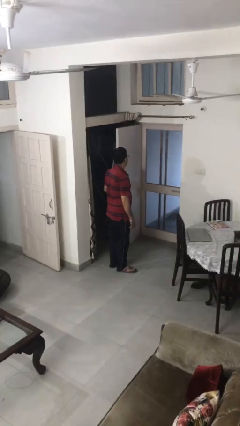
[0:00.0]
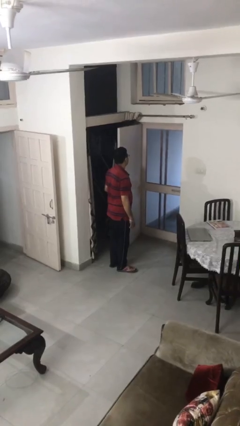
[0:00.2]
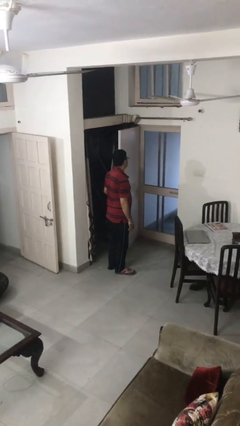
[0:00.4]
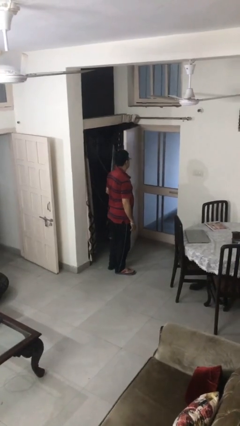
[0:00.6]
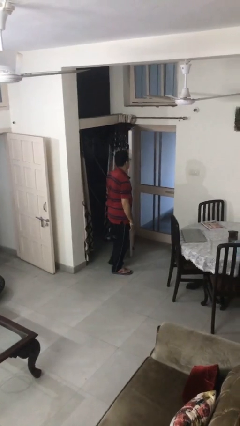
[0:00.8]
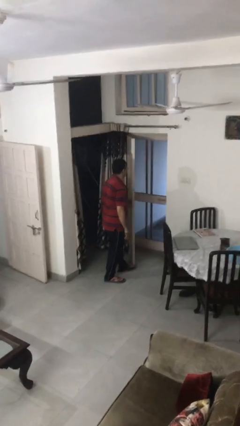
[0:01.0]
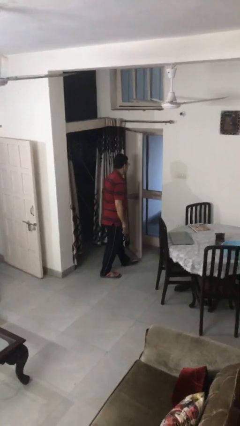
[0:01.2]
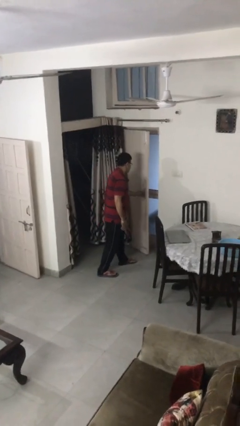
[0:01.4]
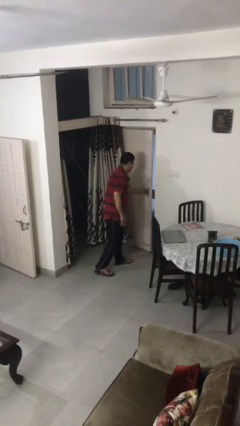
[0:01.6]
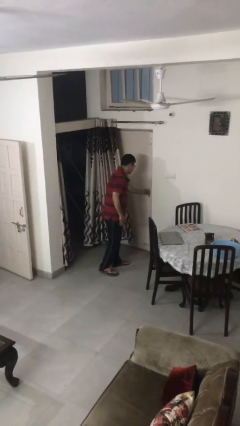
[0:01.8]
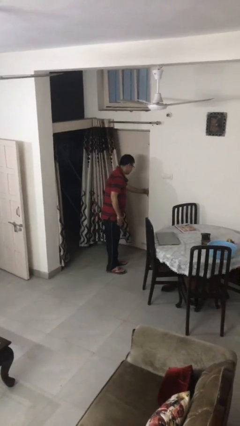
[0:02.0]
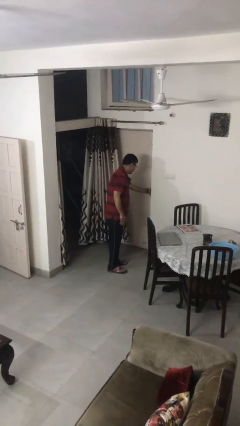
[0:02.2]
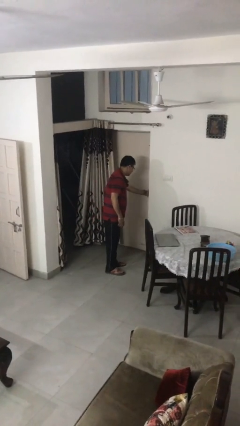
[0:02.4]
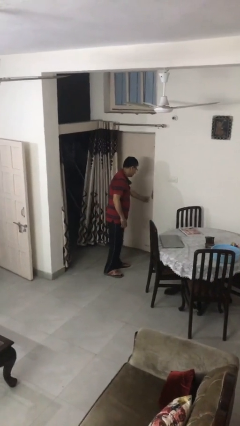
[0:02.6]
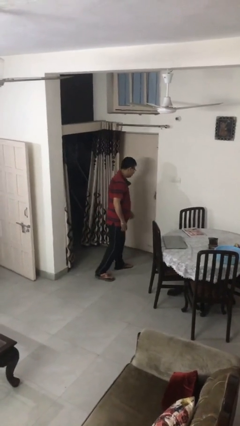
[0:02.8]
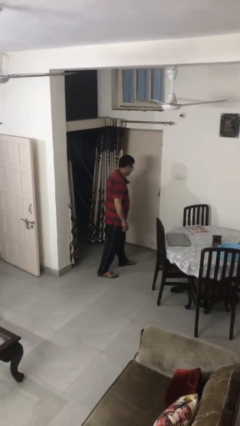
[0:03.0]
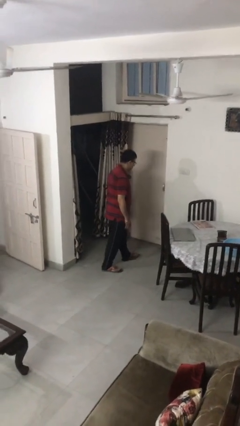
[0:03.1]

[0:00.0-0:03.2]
person closes facility door

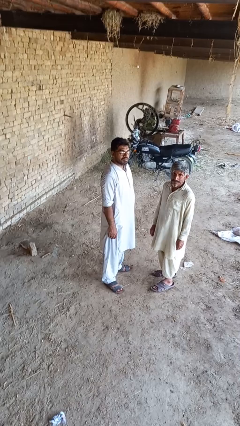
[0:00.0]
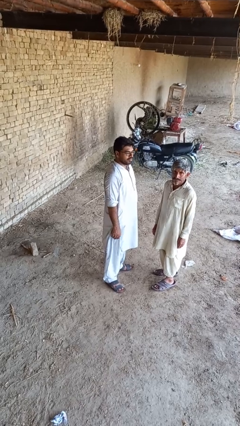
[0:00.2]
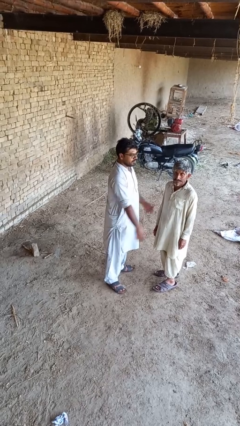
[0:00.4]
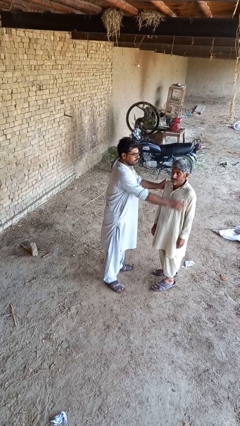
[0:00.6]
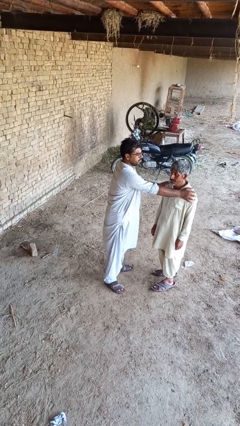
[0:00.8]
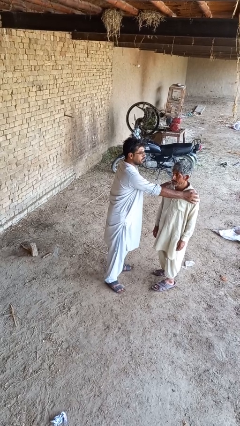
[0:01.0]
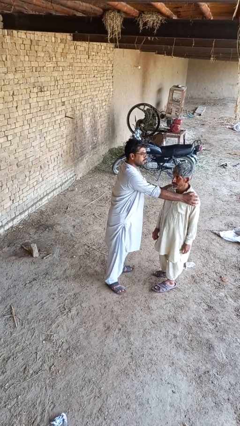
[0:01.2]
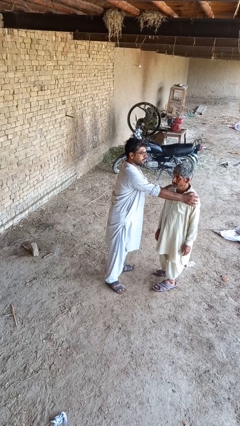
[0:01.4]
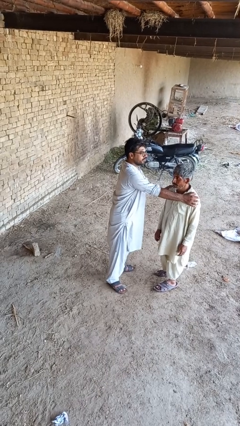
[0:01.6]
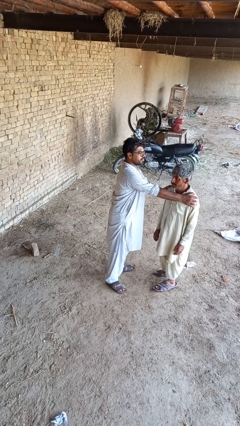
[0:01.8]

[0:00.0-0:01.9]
person grabs person by shoulder

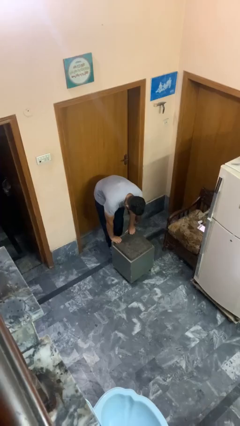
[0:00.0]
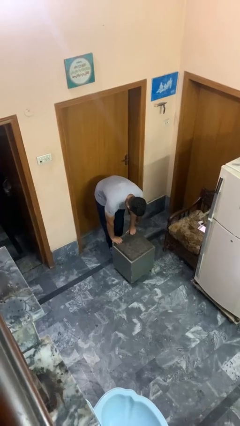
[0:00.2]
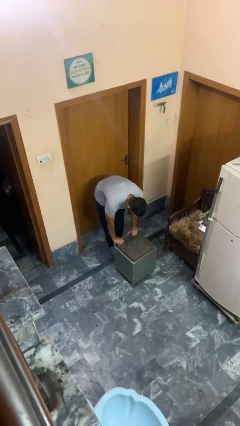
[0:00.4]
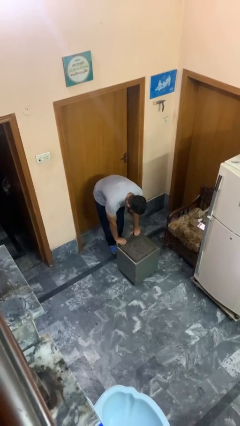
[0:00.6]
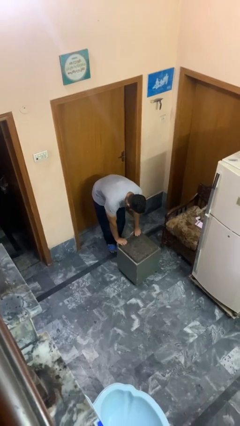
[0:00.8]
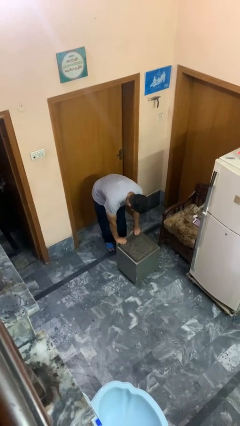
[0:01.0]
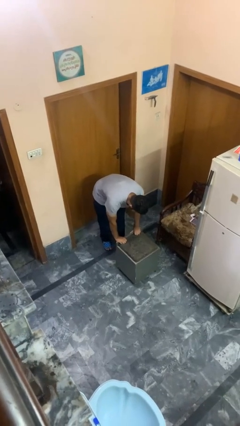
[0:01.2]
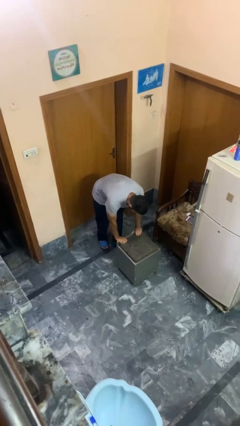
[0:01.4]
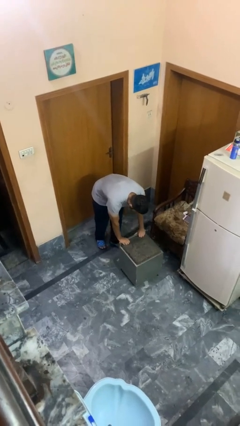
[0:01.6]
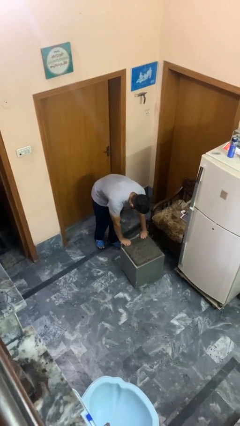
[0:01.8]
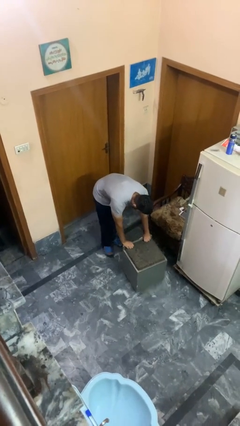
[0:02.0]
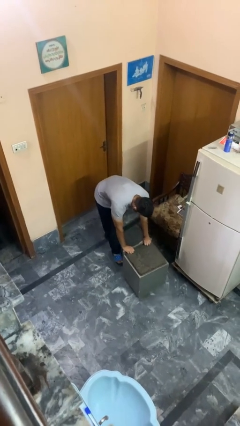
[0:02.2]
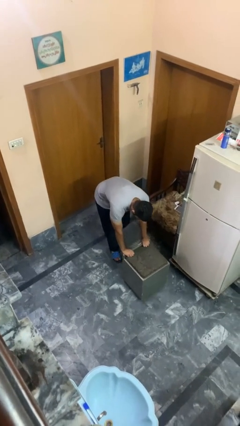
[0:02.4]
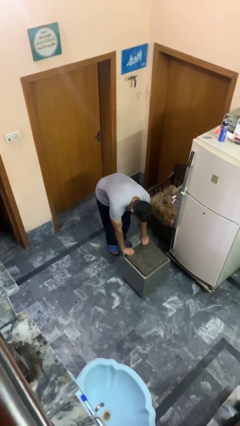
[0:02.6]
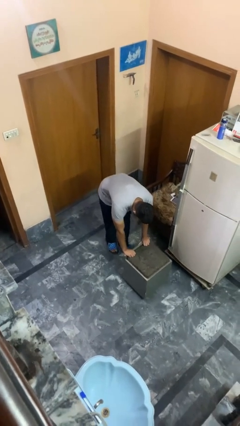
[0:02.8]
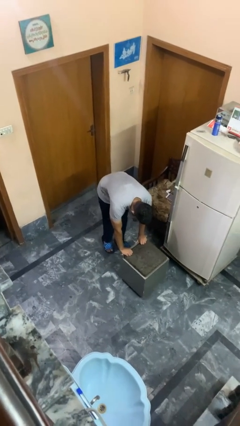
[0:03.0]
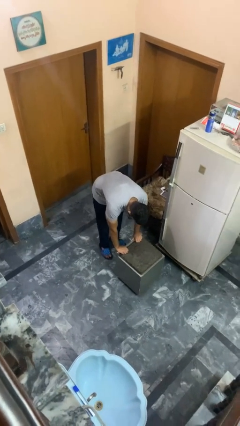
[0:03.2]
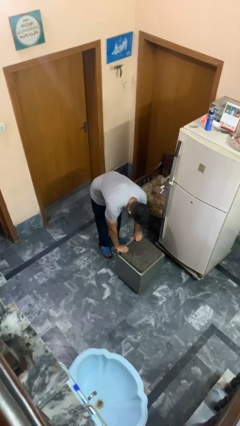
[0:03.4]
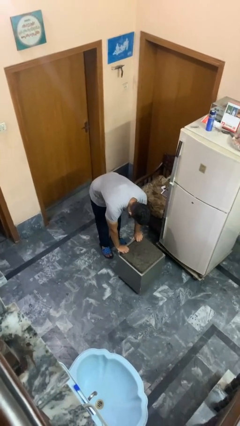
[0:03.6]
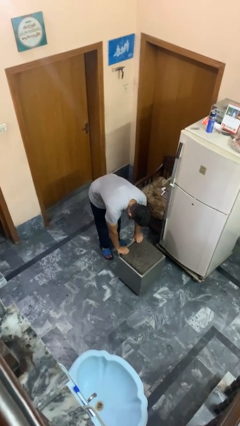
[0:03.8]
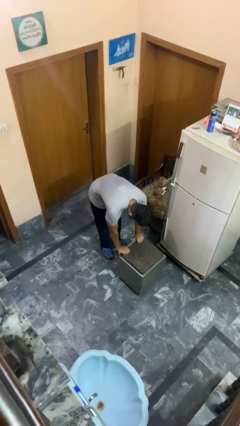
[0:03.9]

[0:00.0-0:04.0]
person pushes wheeled cart

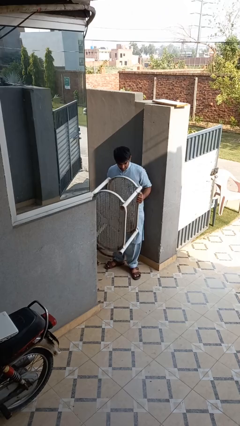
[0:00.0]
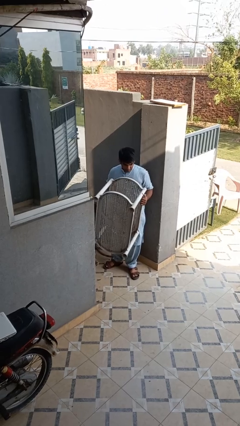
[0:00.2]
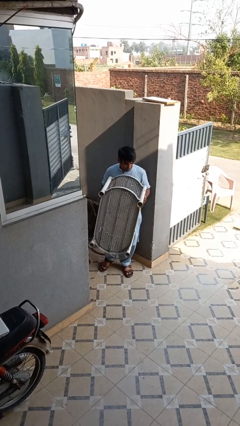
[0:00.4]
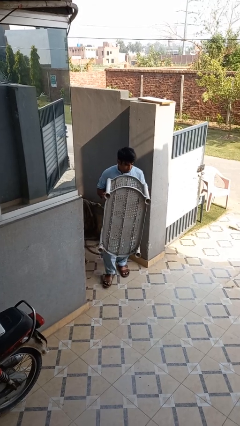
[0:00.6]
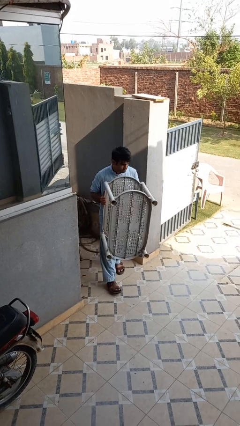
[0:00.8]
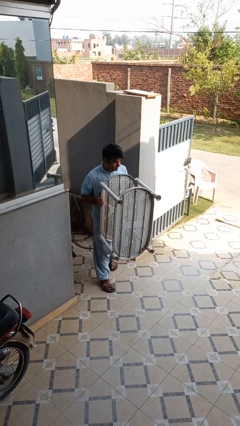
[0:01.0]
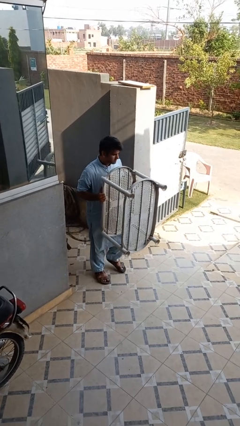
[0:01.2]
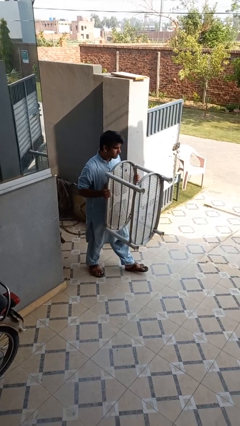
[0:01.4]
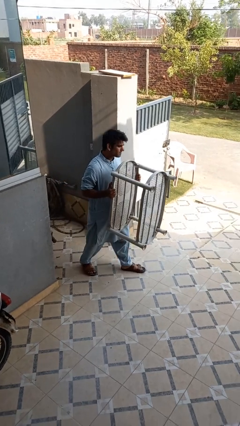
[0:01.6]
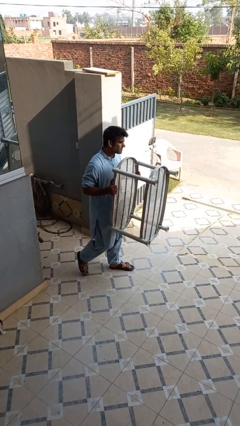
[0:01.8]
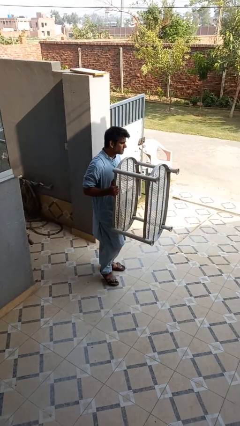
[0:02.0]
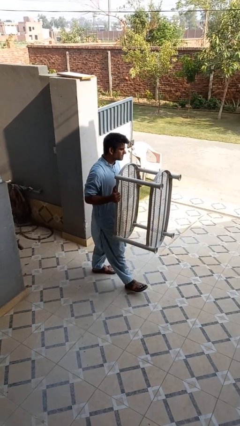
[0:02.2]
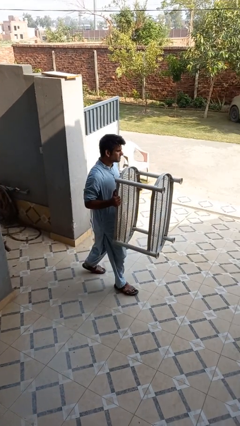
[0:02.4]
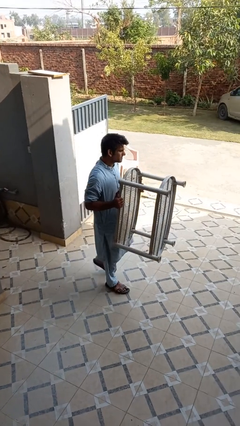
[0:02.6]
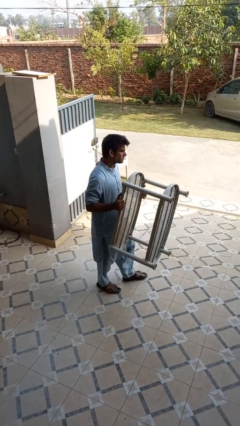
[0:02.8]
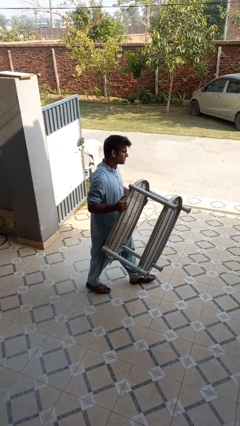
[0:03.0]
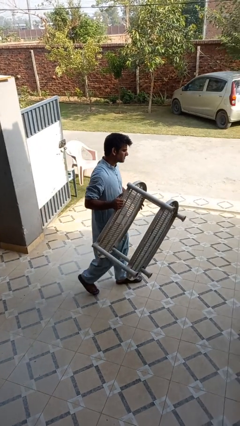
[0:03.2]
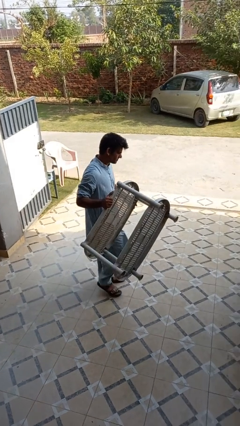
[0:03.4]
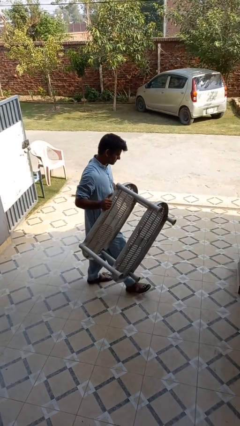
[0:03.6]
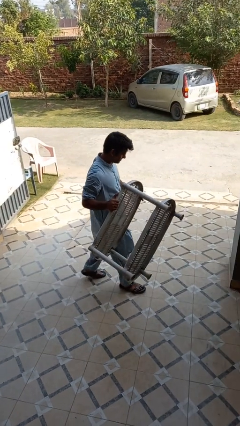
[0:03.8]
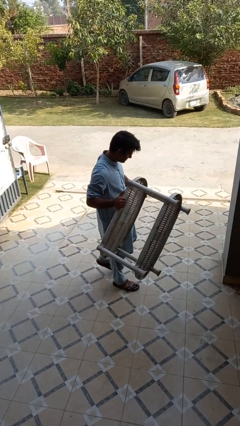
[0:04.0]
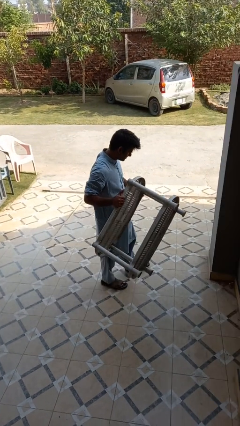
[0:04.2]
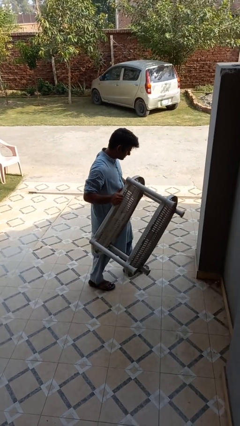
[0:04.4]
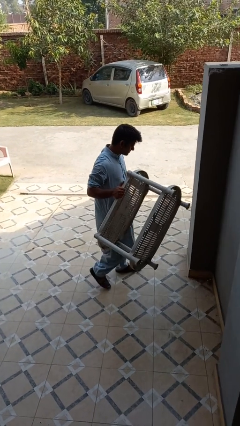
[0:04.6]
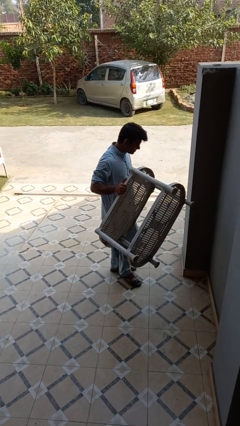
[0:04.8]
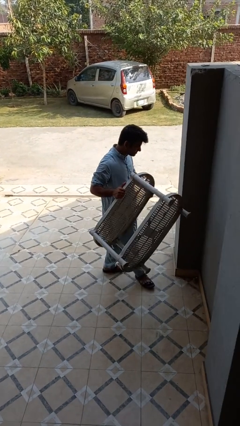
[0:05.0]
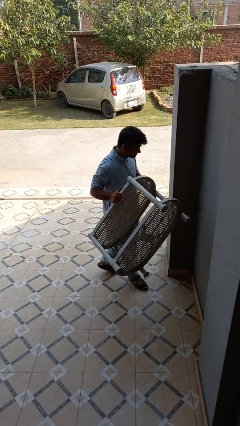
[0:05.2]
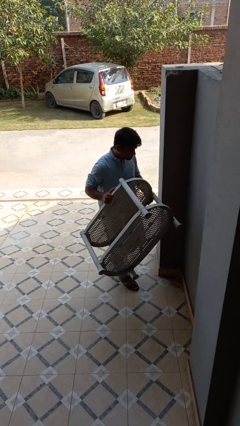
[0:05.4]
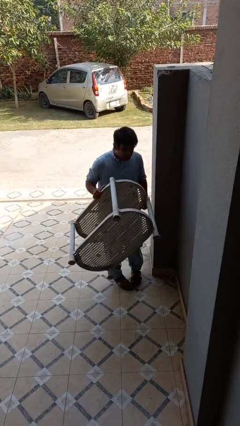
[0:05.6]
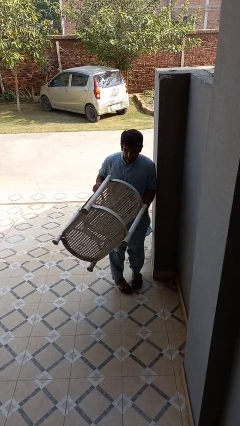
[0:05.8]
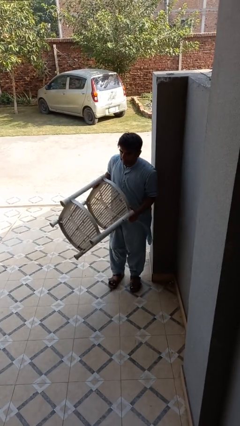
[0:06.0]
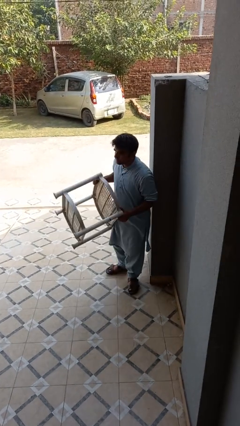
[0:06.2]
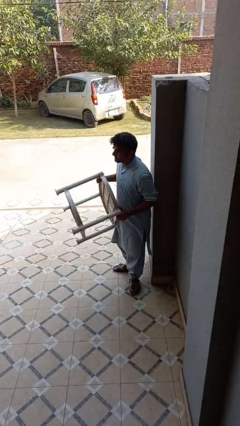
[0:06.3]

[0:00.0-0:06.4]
person carries furniture

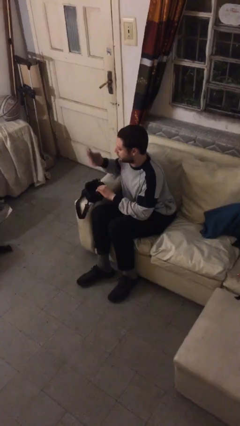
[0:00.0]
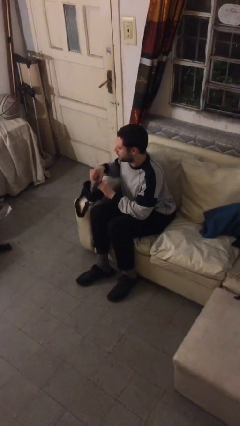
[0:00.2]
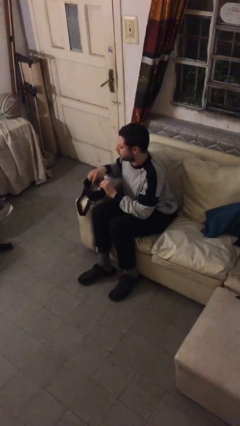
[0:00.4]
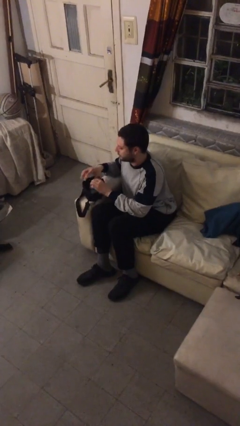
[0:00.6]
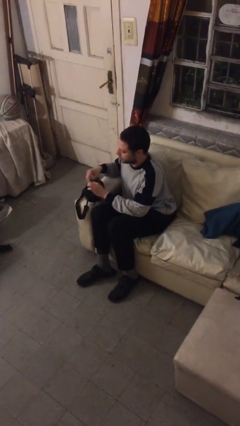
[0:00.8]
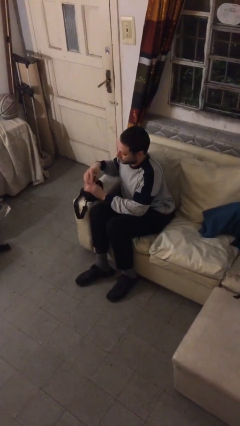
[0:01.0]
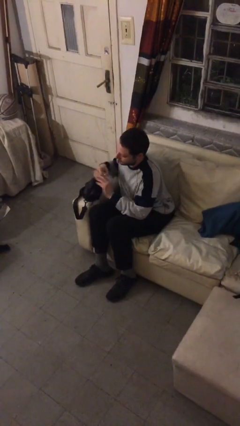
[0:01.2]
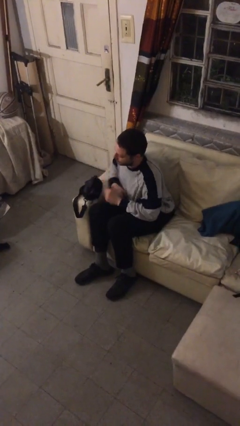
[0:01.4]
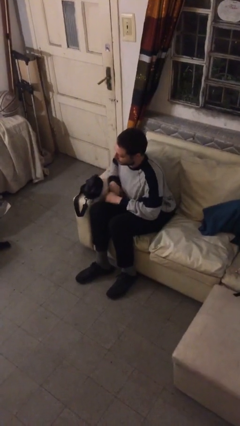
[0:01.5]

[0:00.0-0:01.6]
person puts object into purse

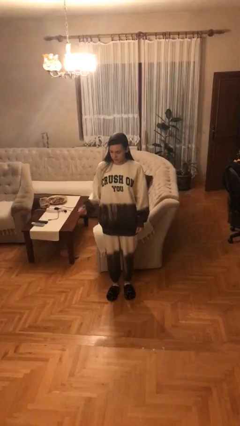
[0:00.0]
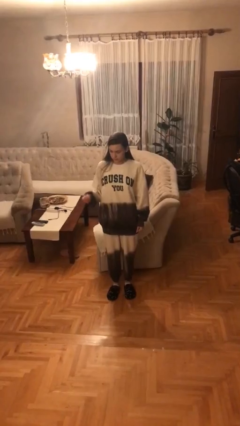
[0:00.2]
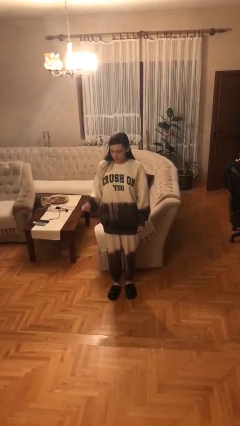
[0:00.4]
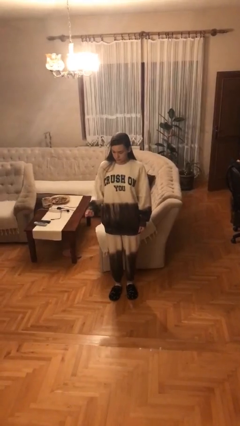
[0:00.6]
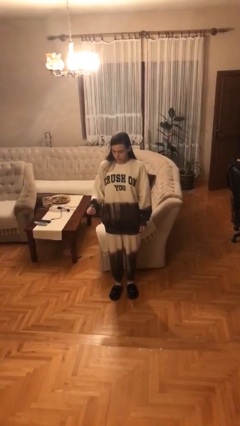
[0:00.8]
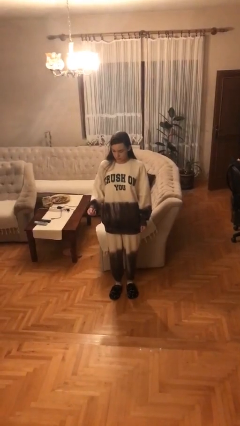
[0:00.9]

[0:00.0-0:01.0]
person snaps fingers
